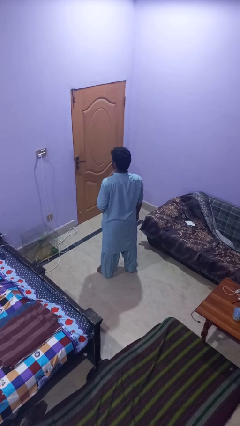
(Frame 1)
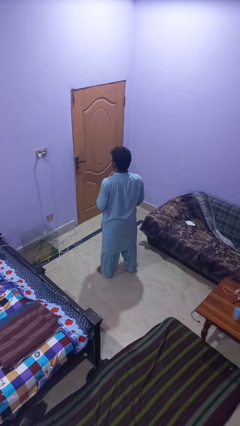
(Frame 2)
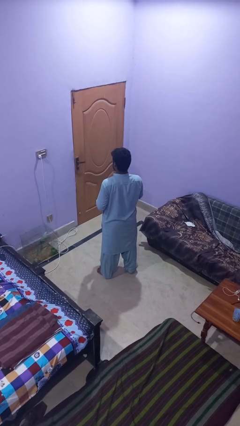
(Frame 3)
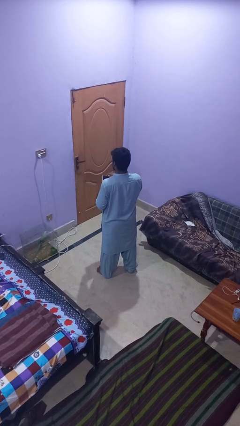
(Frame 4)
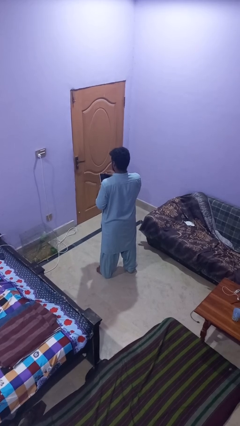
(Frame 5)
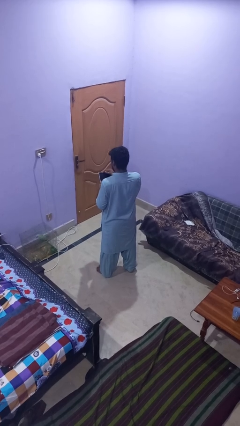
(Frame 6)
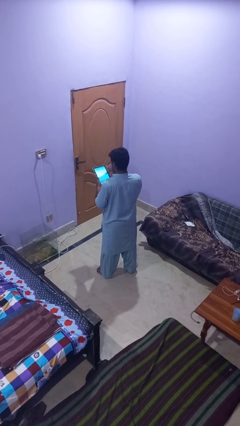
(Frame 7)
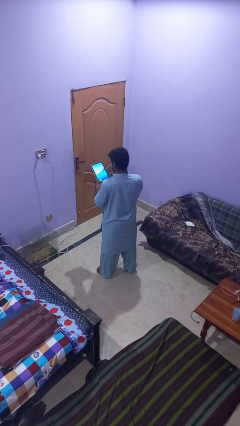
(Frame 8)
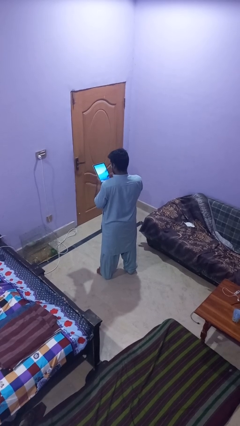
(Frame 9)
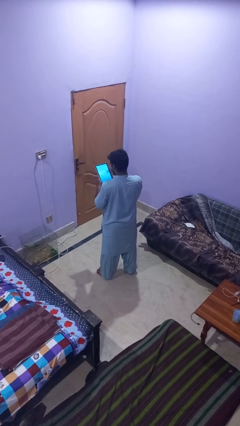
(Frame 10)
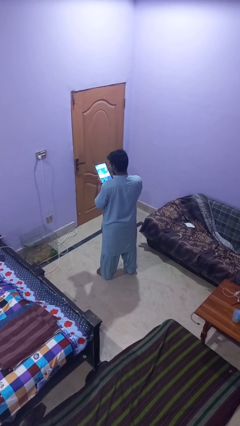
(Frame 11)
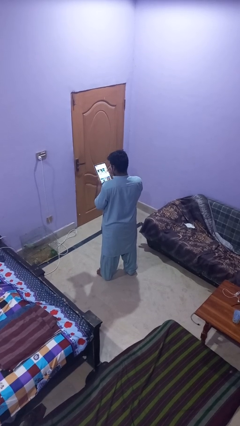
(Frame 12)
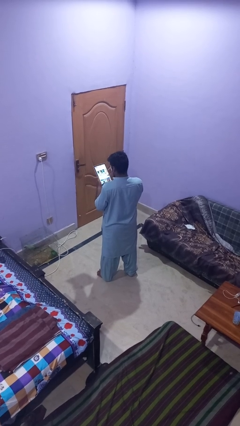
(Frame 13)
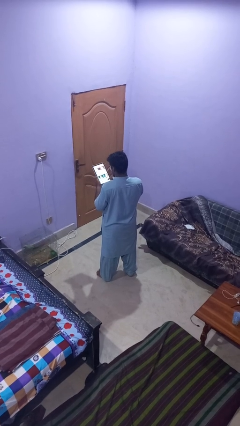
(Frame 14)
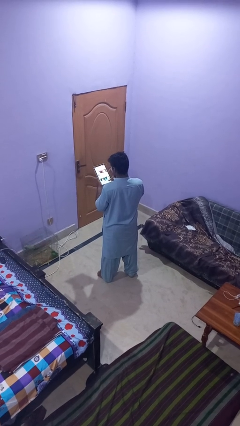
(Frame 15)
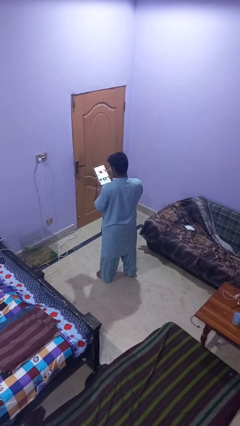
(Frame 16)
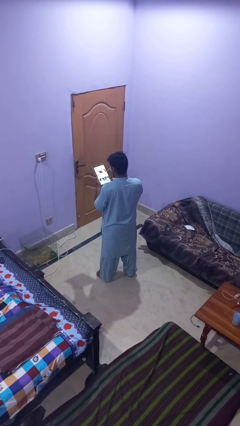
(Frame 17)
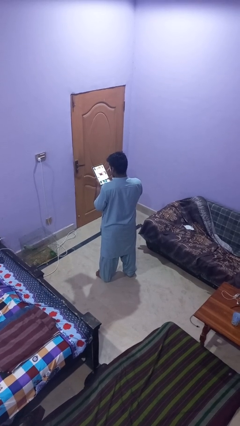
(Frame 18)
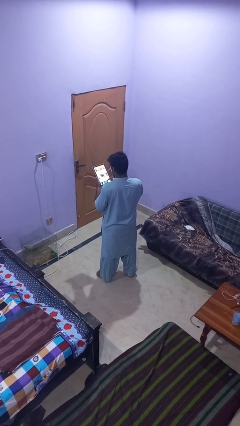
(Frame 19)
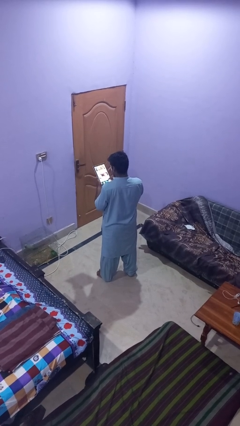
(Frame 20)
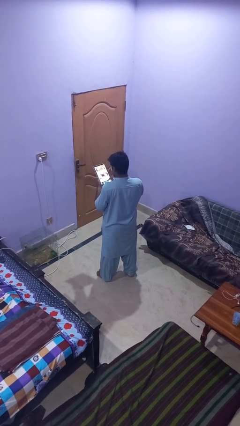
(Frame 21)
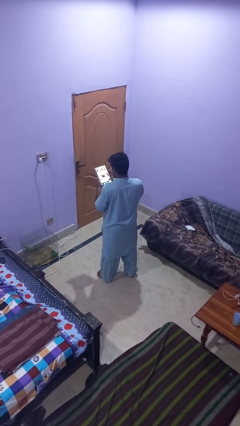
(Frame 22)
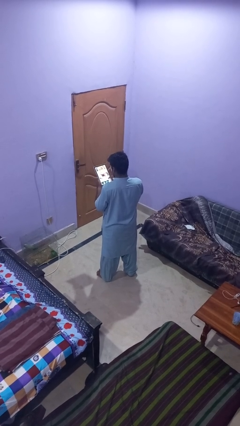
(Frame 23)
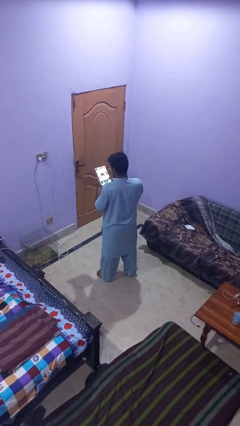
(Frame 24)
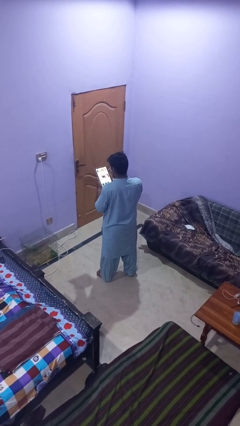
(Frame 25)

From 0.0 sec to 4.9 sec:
person interacts with tablet

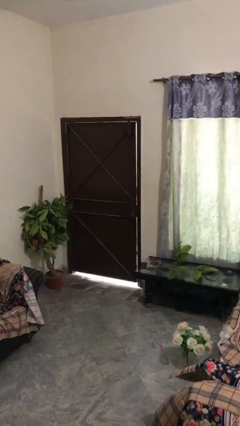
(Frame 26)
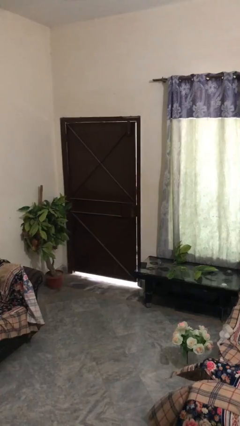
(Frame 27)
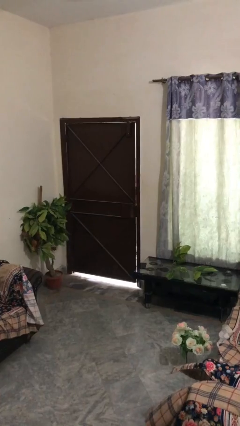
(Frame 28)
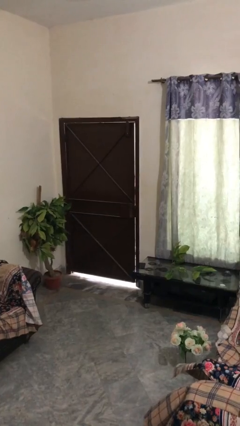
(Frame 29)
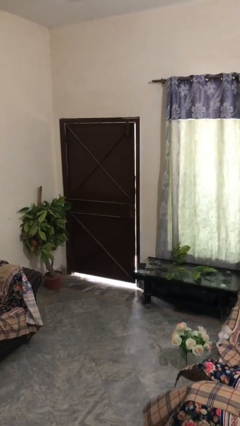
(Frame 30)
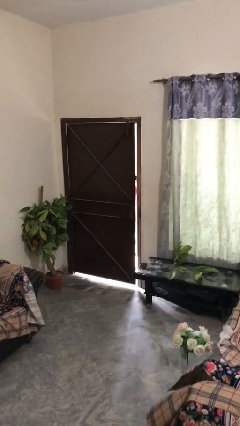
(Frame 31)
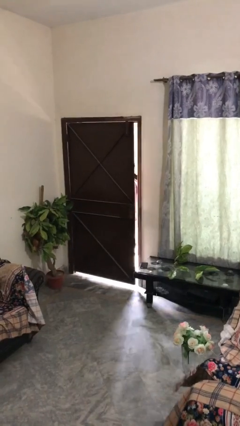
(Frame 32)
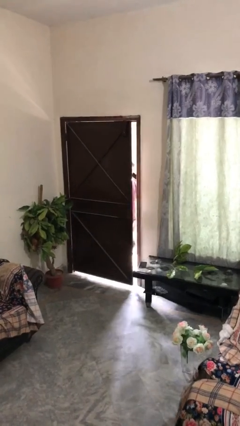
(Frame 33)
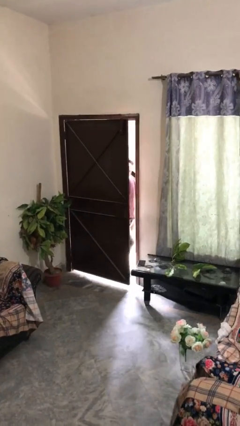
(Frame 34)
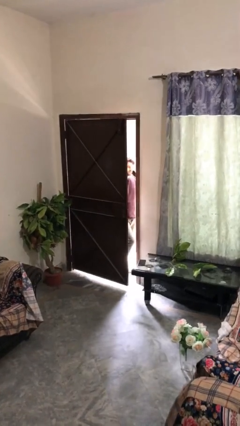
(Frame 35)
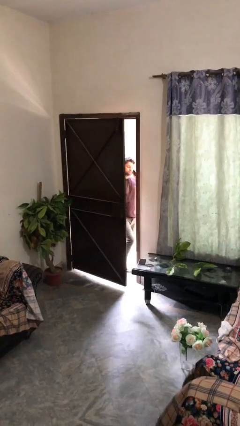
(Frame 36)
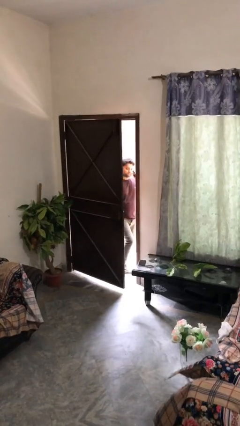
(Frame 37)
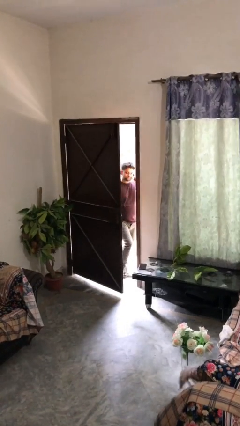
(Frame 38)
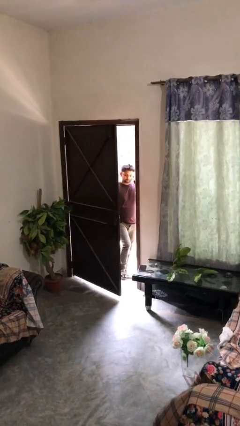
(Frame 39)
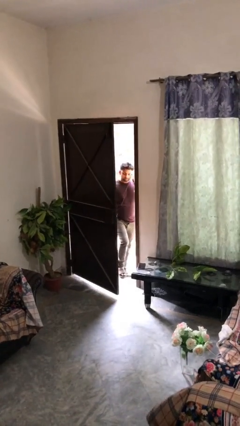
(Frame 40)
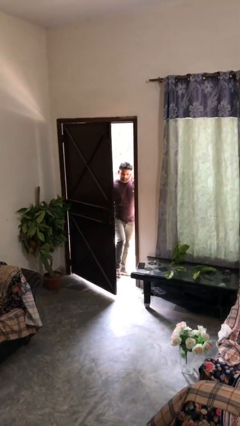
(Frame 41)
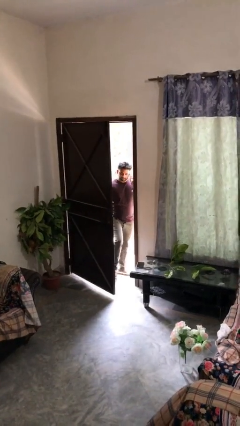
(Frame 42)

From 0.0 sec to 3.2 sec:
person opens facility door

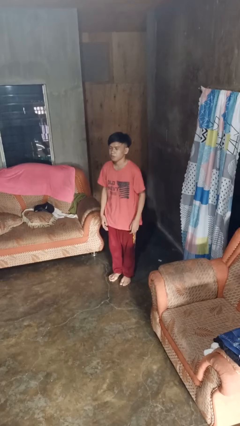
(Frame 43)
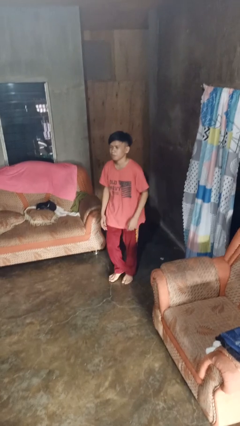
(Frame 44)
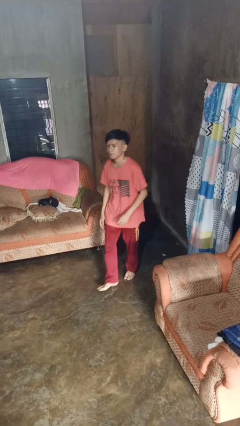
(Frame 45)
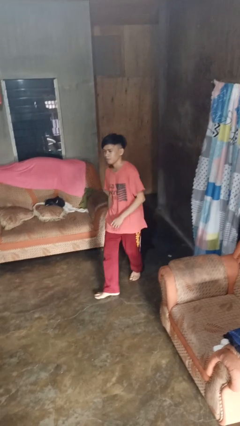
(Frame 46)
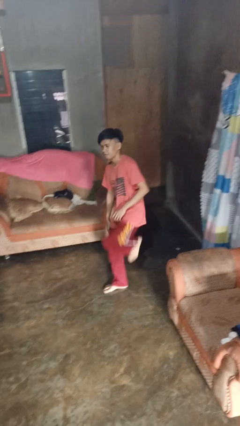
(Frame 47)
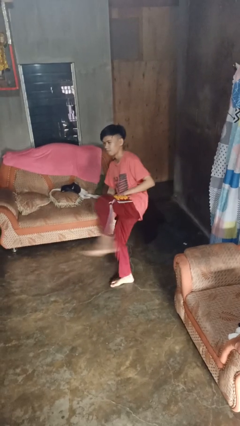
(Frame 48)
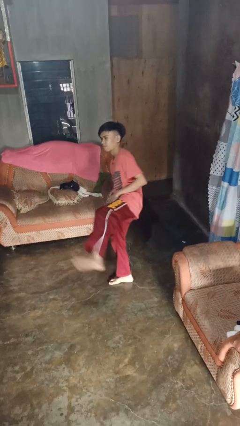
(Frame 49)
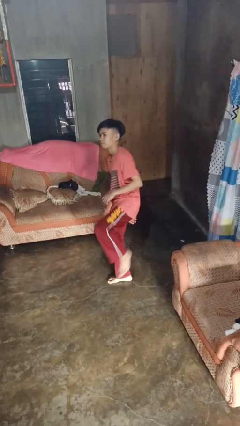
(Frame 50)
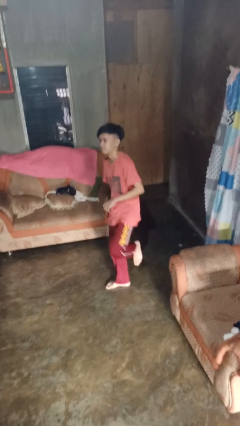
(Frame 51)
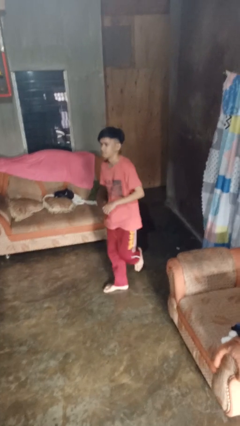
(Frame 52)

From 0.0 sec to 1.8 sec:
person karate kicks

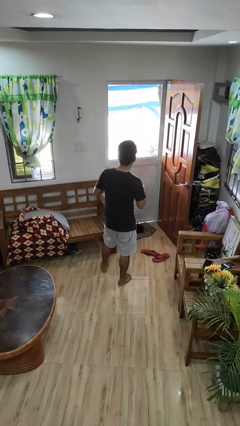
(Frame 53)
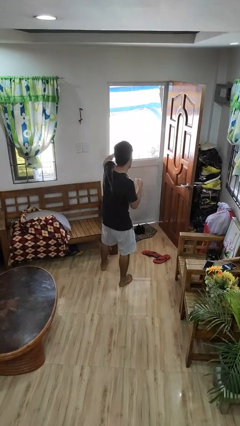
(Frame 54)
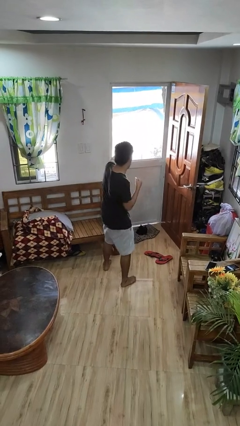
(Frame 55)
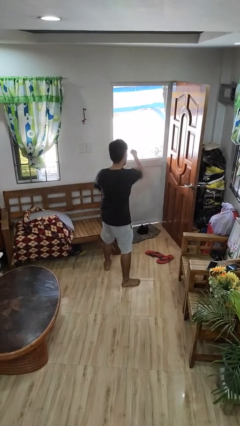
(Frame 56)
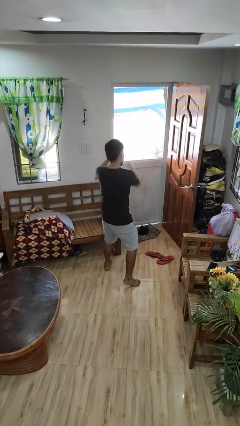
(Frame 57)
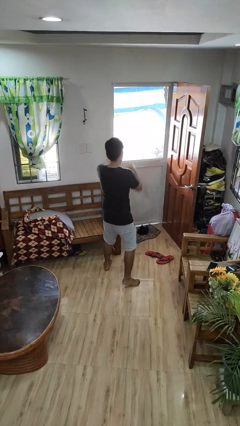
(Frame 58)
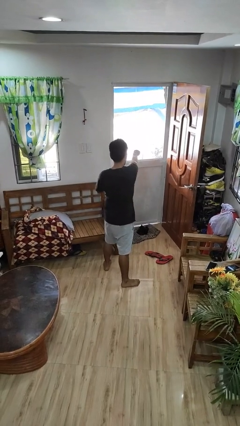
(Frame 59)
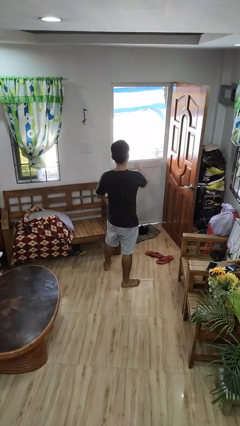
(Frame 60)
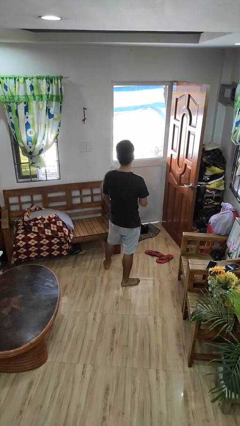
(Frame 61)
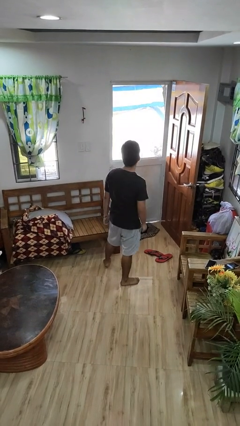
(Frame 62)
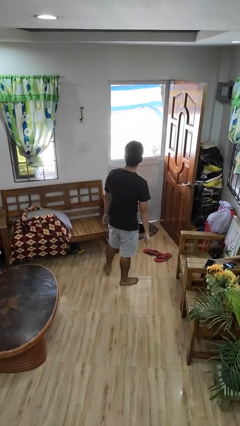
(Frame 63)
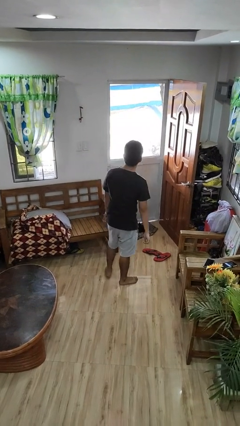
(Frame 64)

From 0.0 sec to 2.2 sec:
person punches

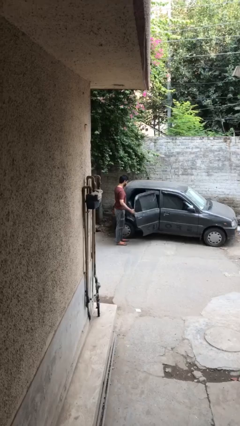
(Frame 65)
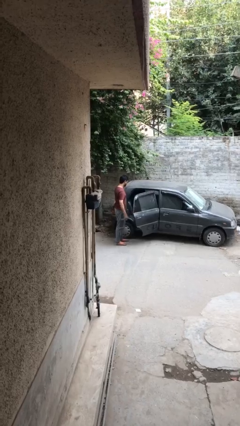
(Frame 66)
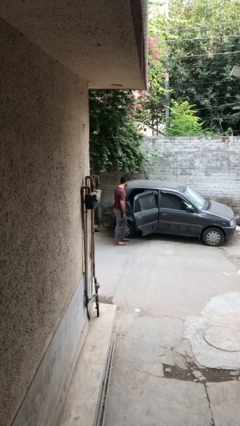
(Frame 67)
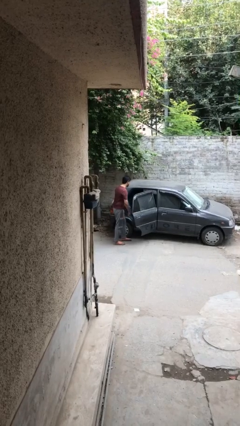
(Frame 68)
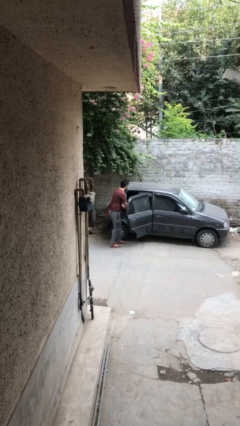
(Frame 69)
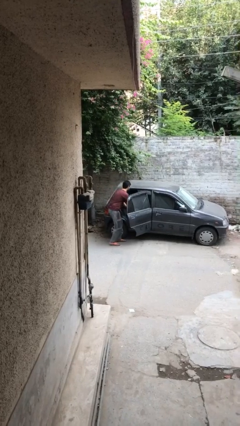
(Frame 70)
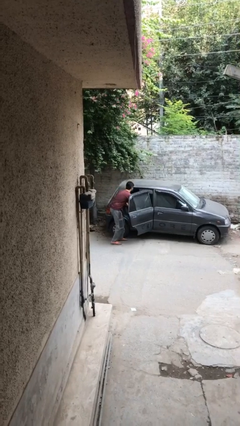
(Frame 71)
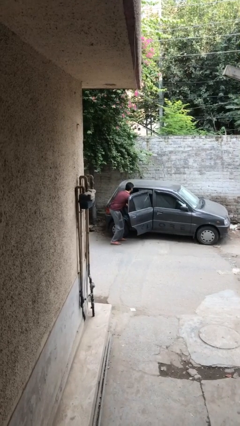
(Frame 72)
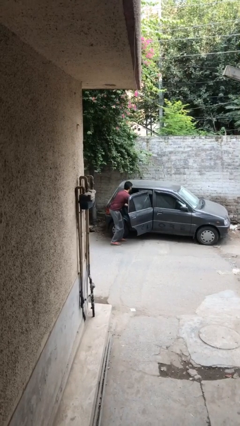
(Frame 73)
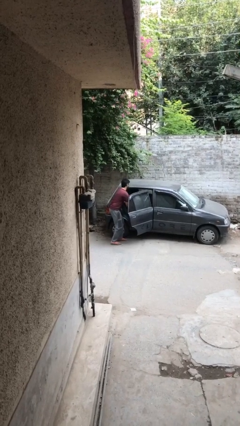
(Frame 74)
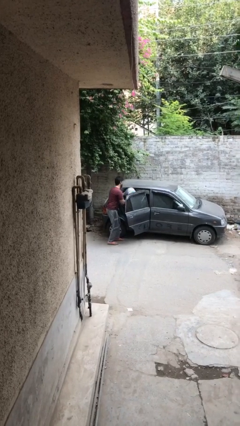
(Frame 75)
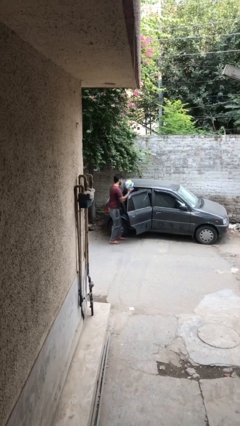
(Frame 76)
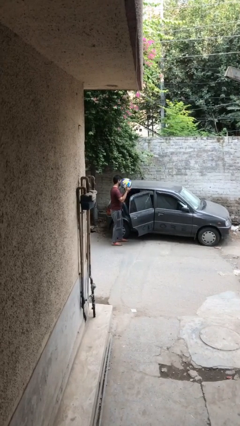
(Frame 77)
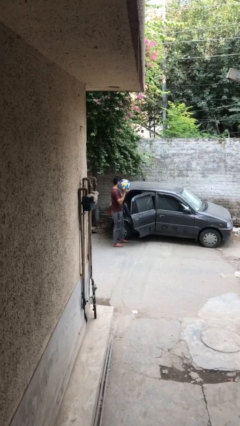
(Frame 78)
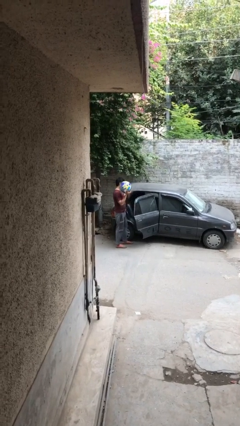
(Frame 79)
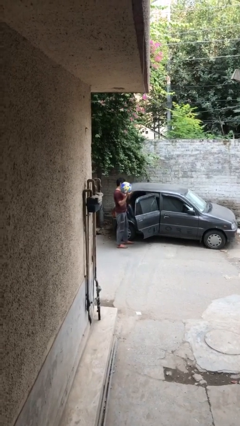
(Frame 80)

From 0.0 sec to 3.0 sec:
person unloads car

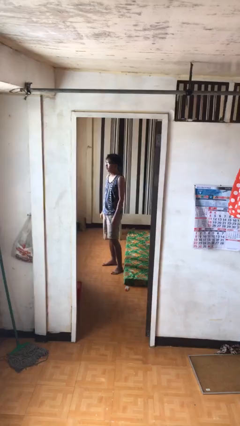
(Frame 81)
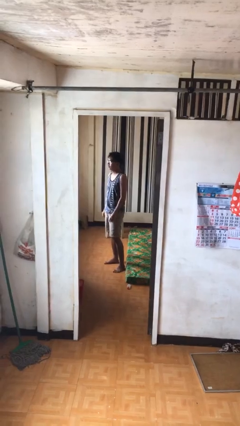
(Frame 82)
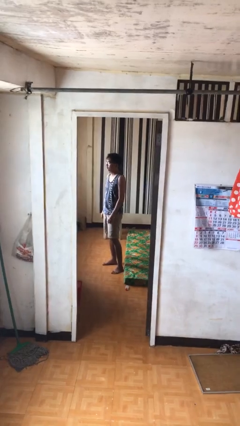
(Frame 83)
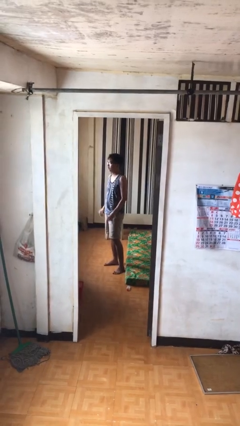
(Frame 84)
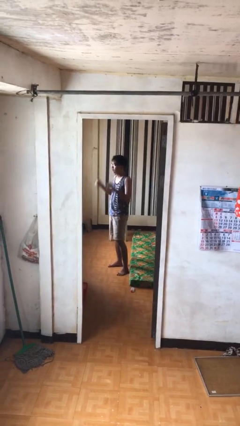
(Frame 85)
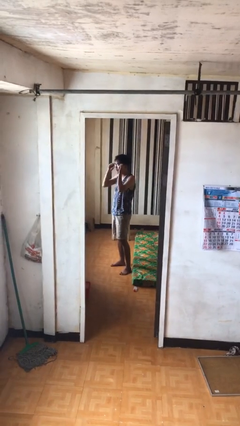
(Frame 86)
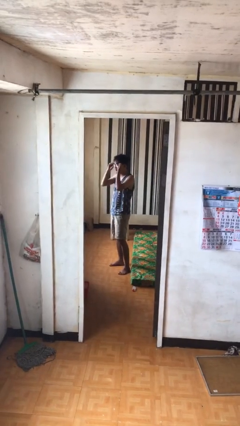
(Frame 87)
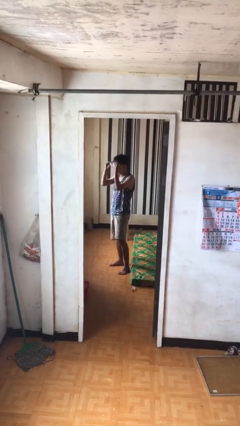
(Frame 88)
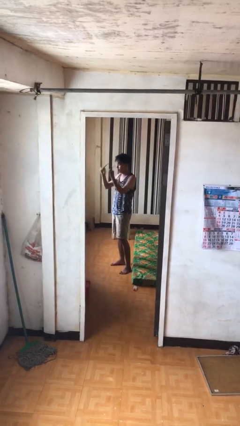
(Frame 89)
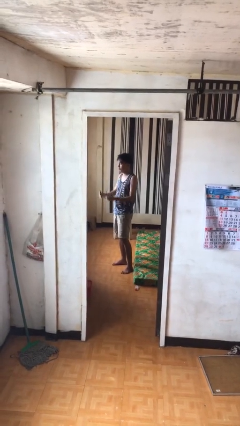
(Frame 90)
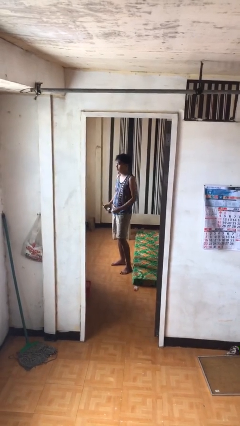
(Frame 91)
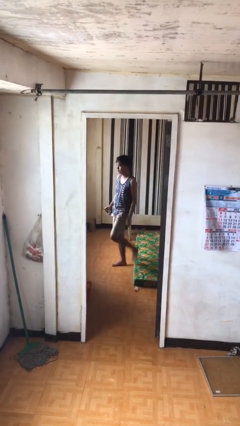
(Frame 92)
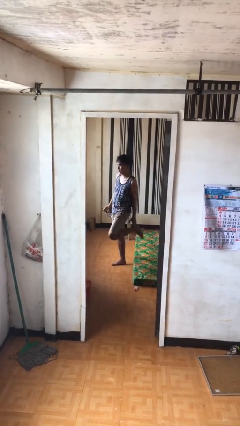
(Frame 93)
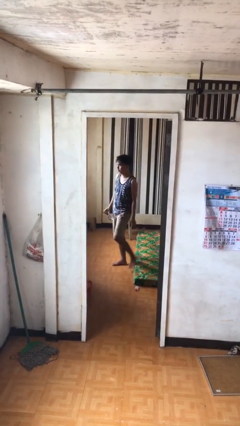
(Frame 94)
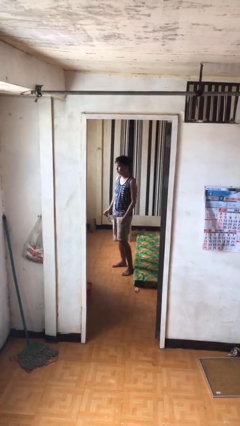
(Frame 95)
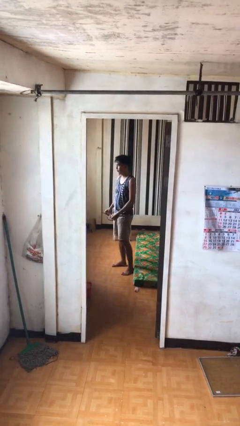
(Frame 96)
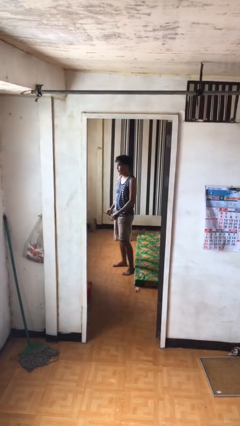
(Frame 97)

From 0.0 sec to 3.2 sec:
person takes off glasses
